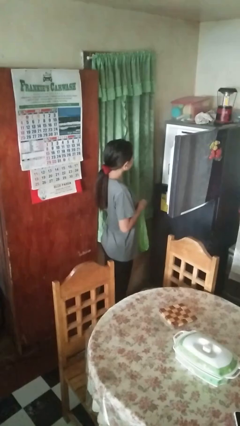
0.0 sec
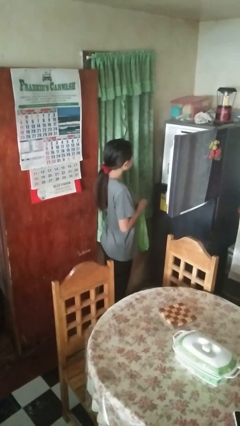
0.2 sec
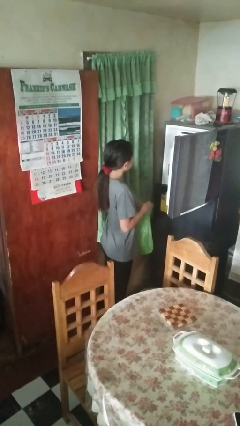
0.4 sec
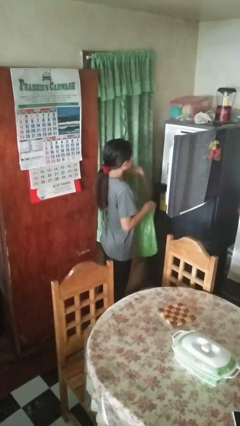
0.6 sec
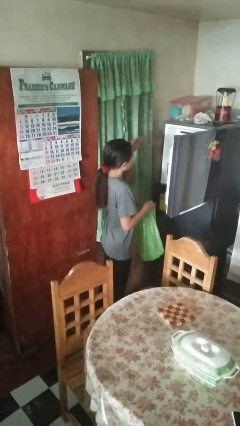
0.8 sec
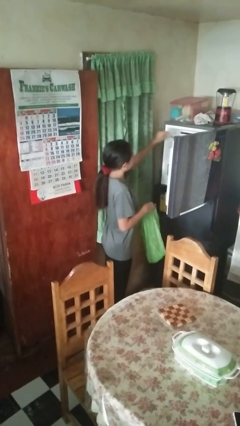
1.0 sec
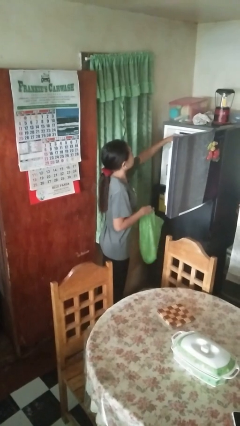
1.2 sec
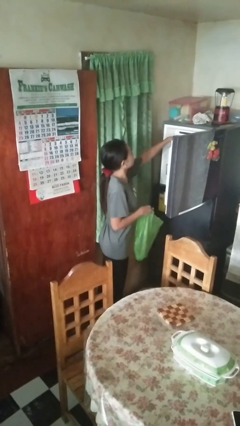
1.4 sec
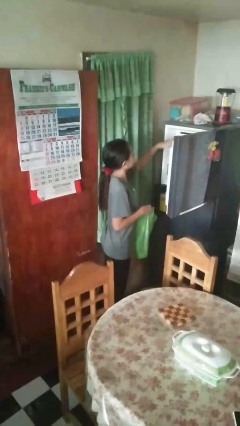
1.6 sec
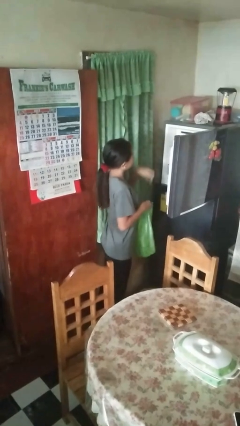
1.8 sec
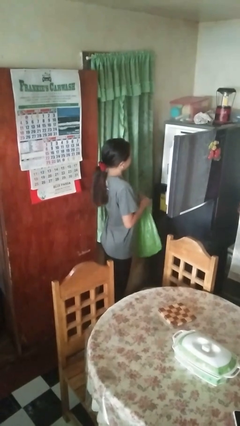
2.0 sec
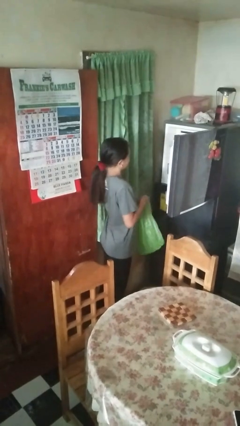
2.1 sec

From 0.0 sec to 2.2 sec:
person loads groceries into refrigerator

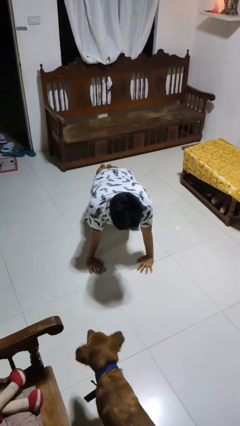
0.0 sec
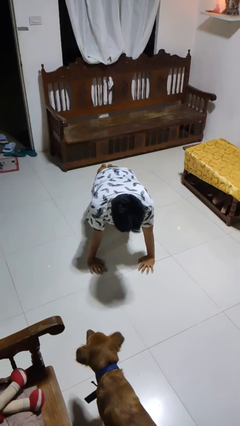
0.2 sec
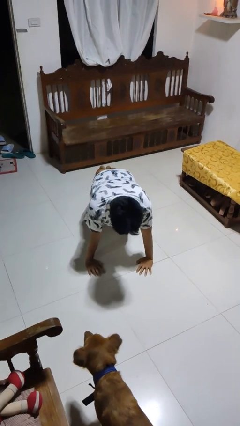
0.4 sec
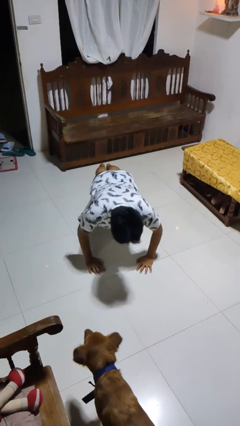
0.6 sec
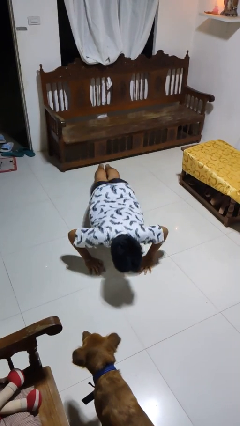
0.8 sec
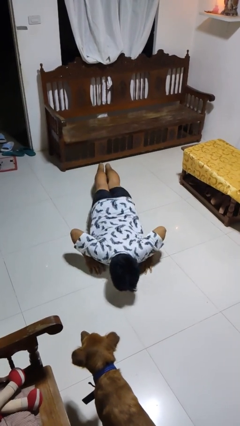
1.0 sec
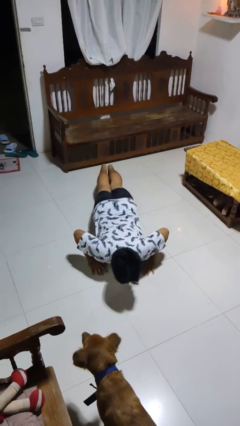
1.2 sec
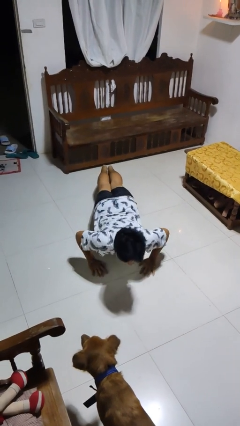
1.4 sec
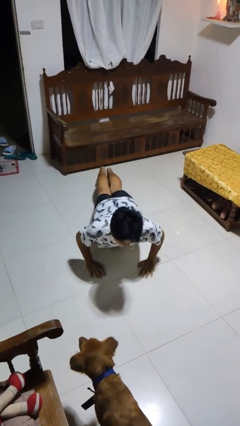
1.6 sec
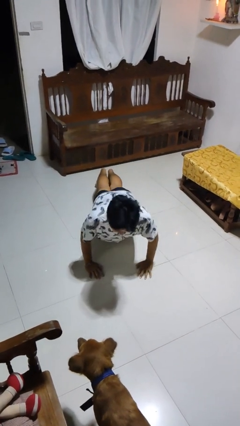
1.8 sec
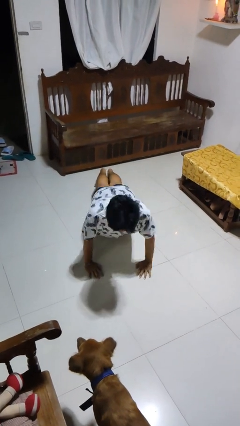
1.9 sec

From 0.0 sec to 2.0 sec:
person exercises with pushup

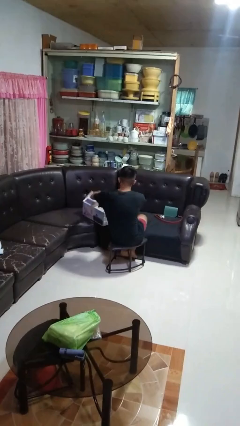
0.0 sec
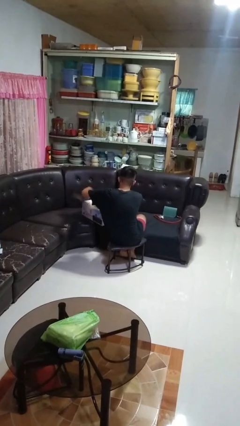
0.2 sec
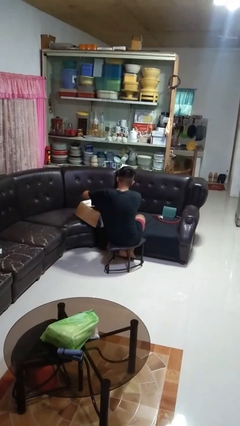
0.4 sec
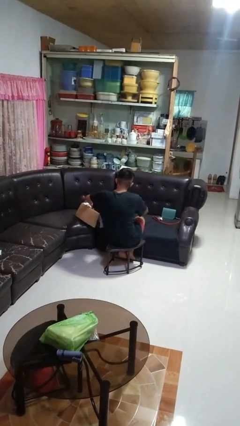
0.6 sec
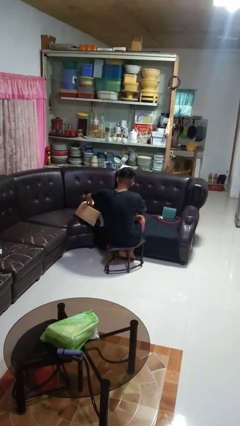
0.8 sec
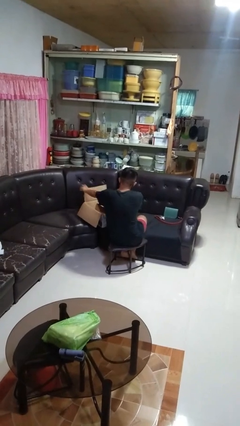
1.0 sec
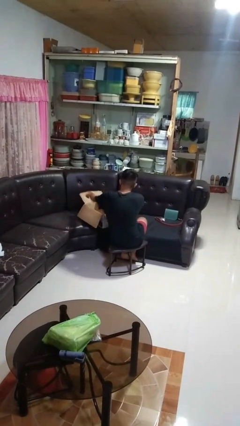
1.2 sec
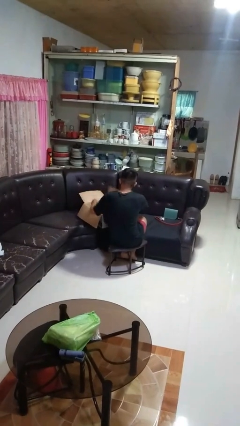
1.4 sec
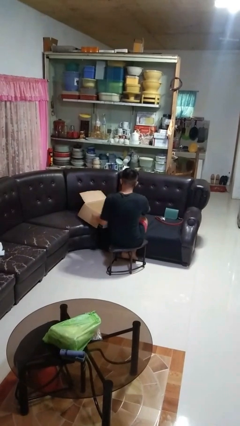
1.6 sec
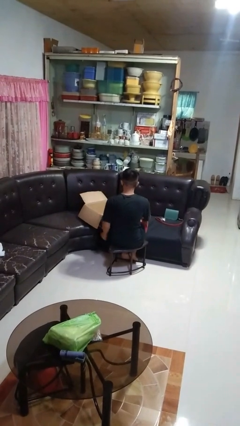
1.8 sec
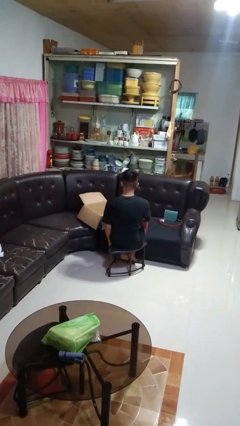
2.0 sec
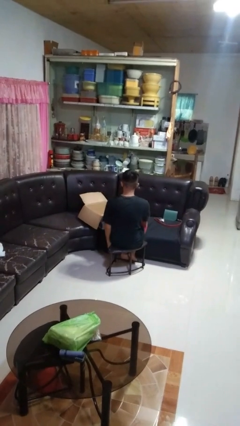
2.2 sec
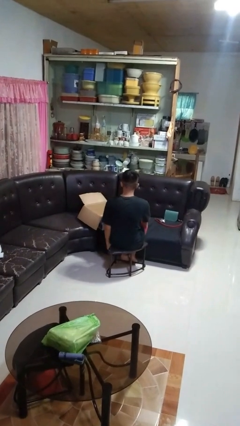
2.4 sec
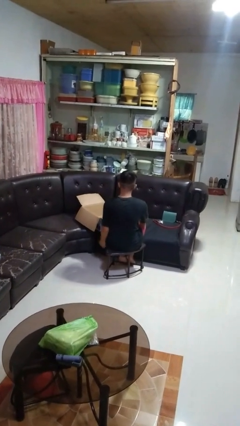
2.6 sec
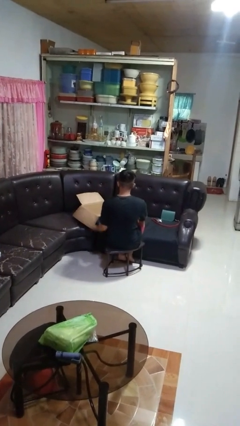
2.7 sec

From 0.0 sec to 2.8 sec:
person opens box

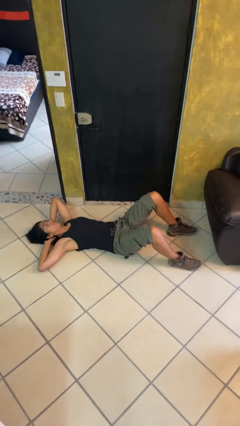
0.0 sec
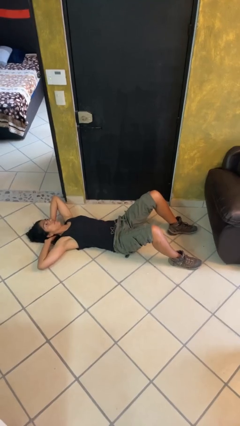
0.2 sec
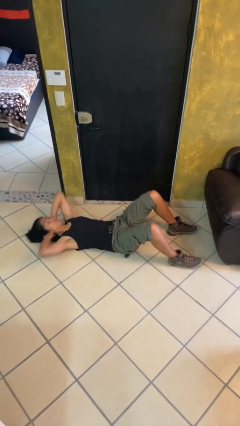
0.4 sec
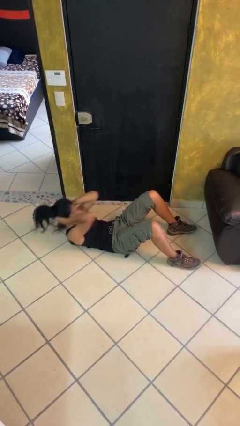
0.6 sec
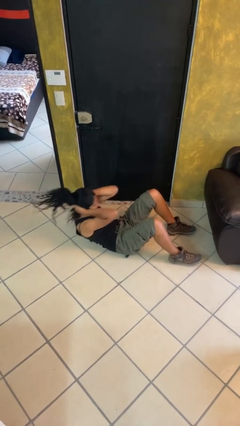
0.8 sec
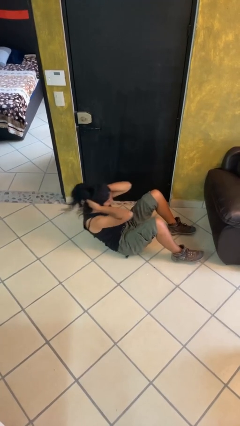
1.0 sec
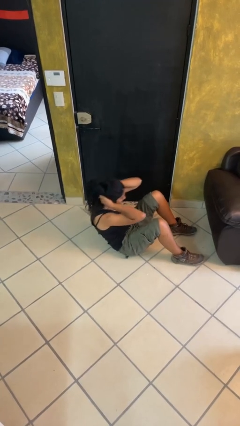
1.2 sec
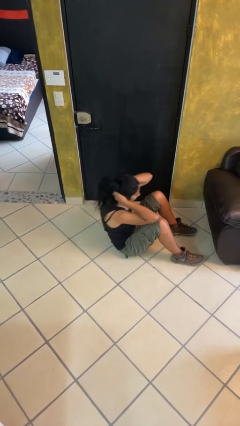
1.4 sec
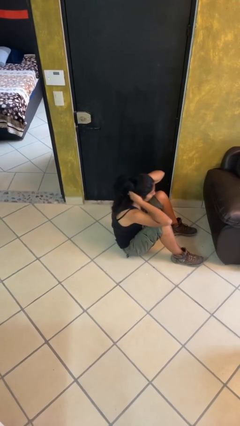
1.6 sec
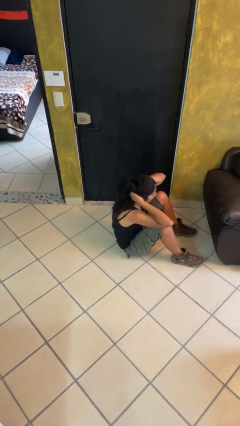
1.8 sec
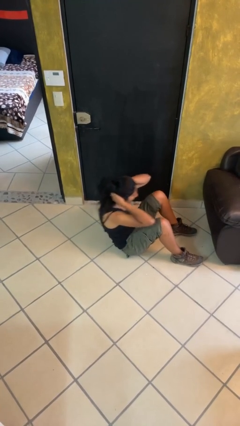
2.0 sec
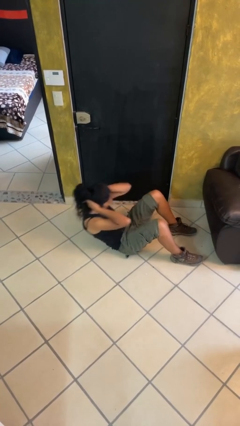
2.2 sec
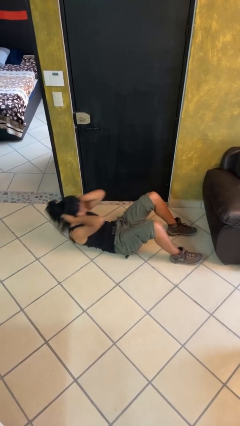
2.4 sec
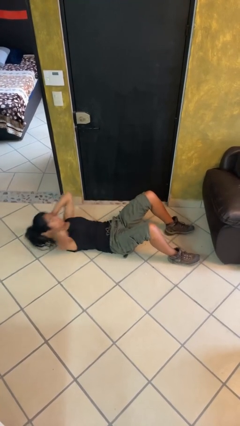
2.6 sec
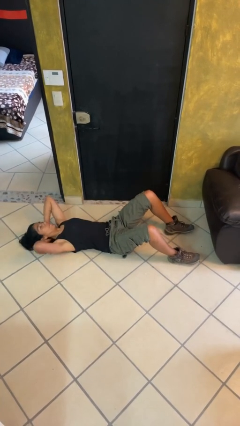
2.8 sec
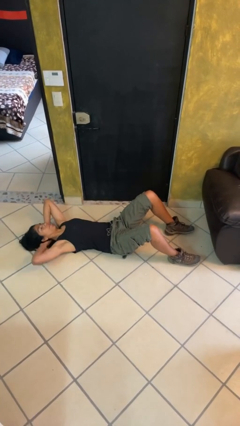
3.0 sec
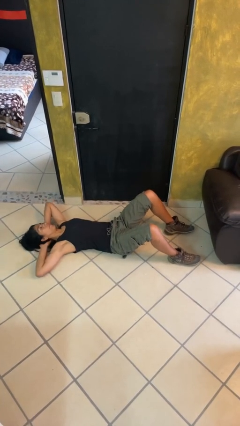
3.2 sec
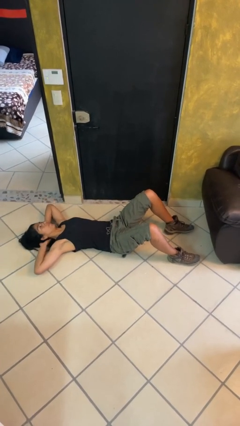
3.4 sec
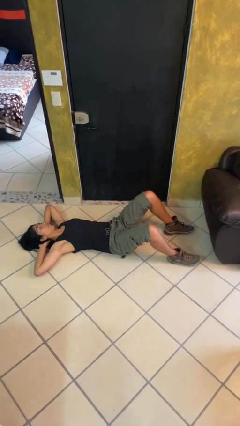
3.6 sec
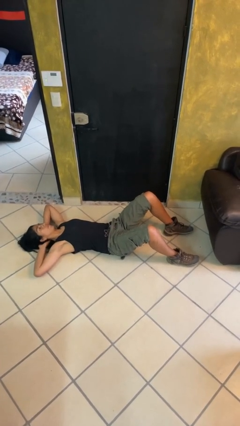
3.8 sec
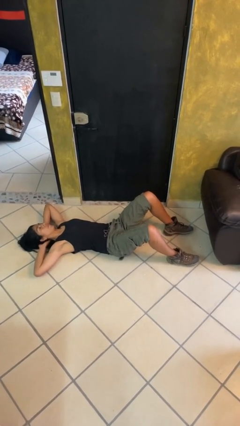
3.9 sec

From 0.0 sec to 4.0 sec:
person exercises with situp

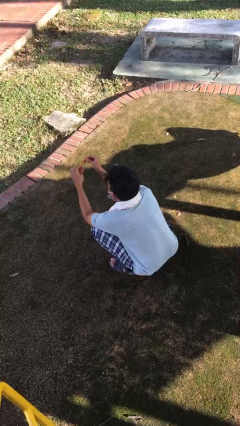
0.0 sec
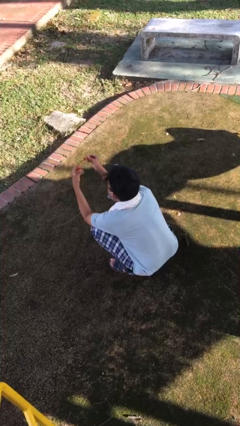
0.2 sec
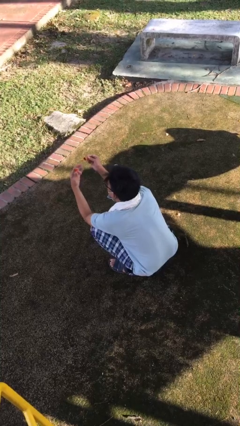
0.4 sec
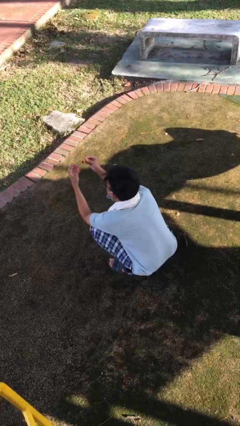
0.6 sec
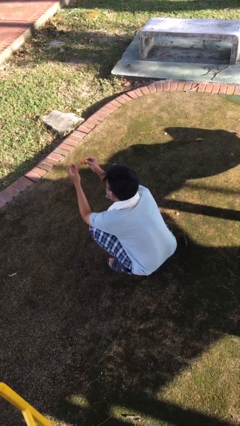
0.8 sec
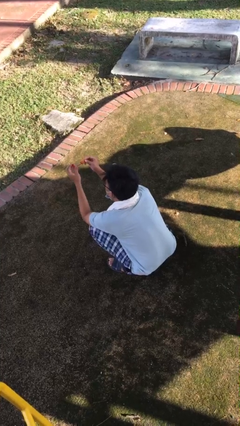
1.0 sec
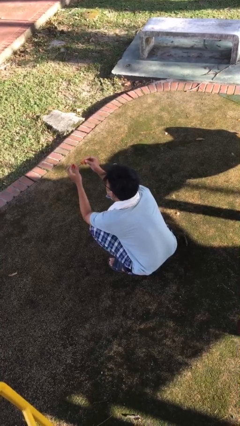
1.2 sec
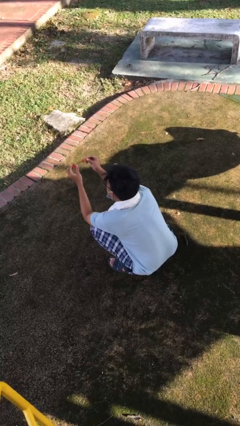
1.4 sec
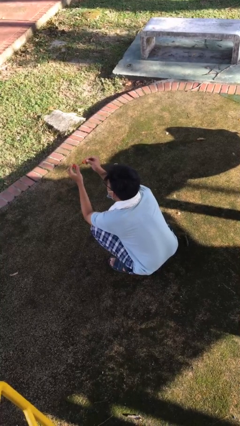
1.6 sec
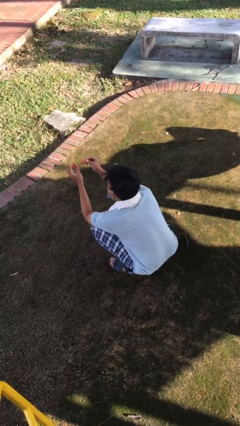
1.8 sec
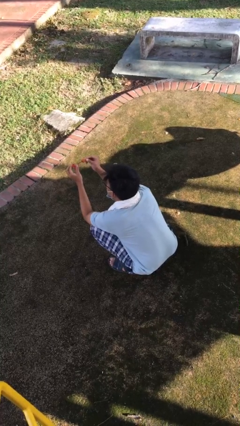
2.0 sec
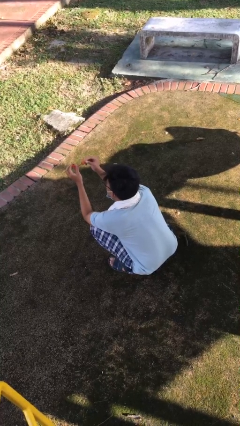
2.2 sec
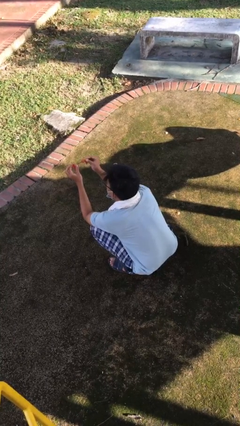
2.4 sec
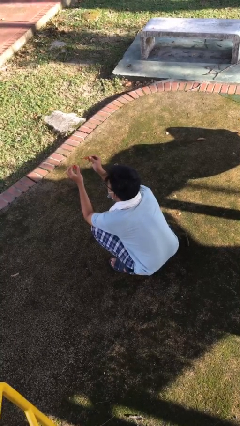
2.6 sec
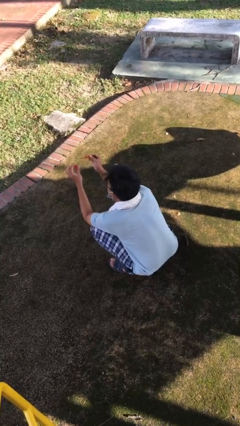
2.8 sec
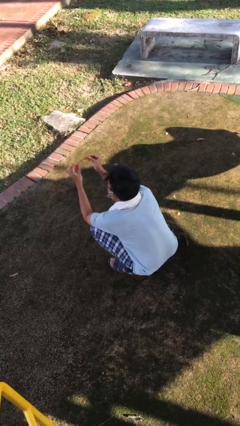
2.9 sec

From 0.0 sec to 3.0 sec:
person paints fingernails

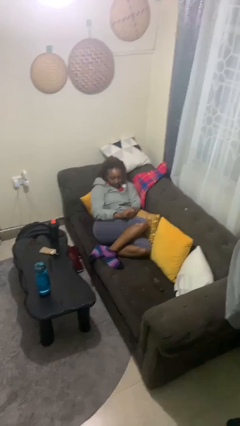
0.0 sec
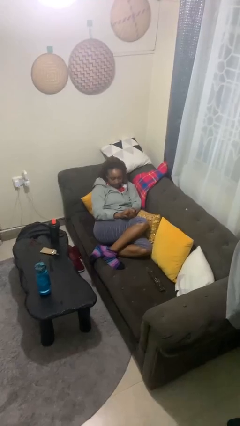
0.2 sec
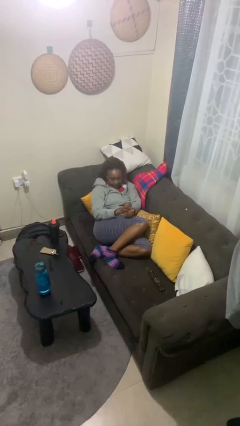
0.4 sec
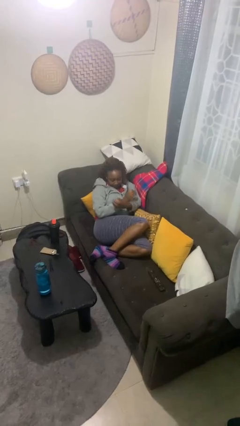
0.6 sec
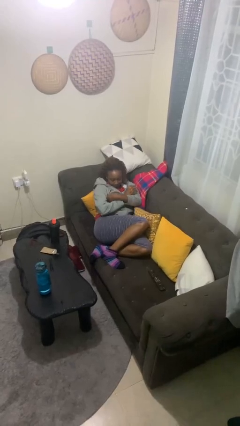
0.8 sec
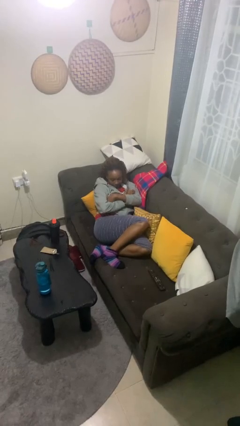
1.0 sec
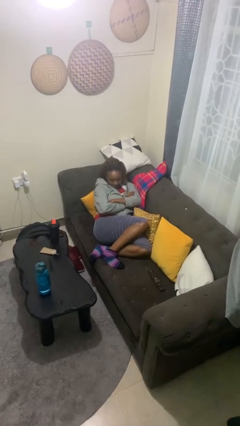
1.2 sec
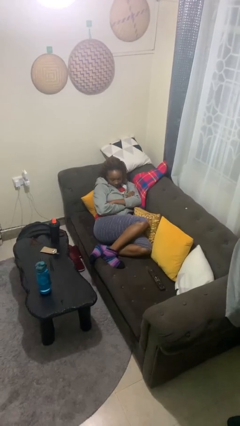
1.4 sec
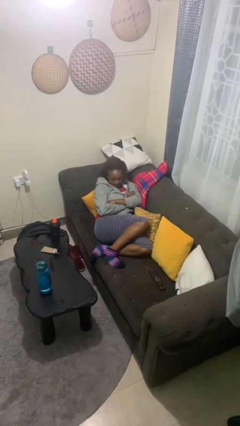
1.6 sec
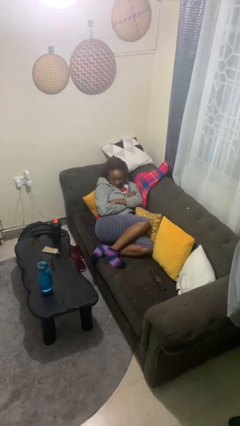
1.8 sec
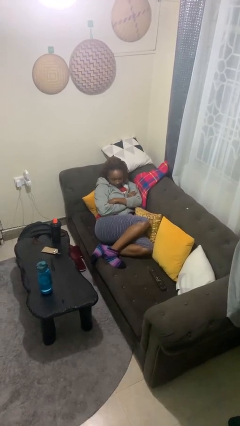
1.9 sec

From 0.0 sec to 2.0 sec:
person crosses arms

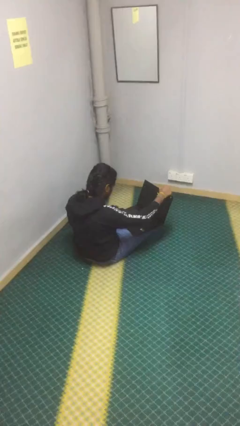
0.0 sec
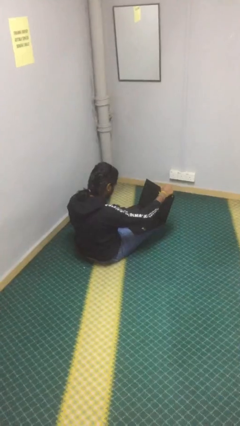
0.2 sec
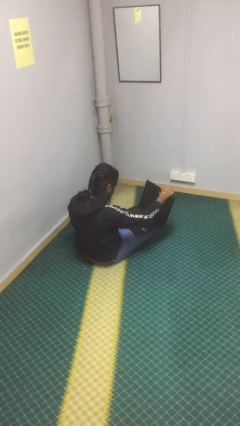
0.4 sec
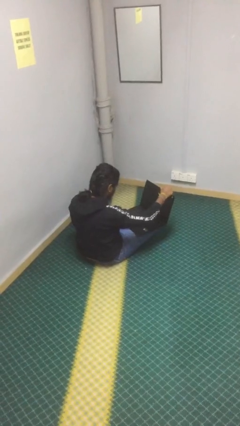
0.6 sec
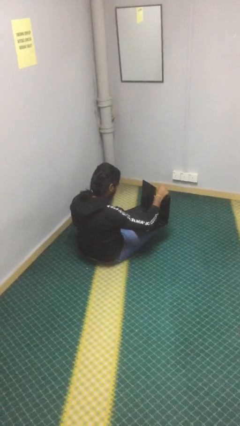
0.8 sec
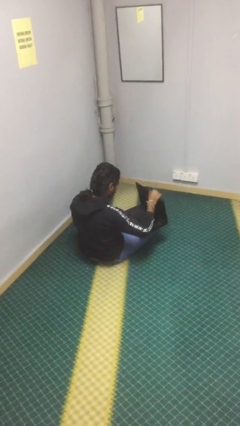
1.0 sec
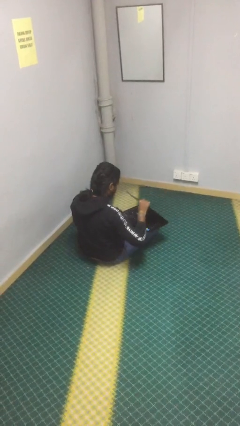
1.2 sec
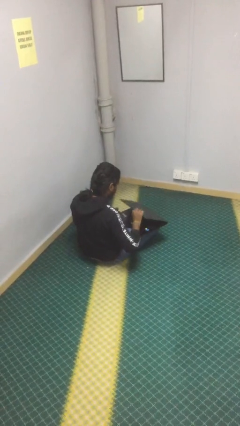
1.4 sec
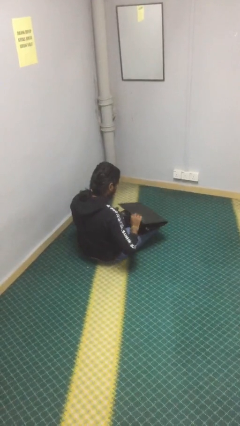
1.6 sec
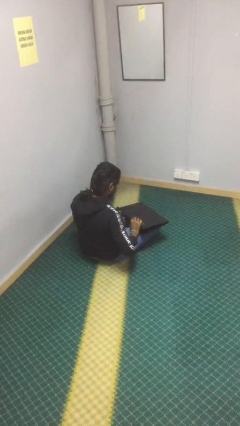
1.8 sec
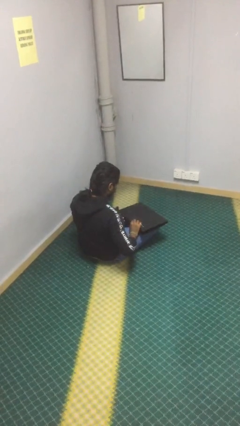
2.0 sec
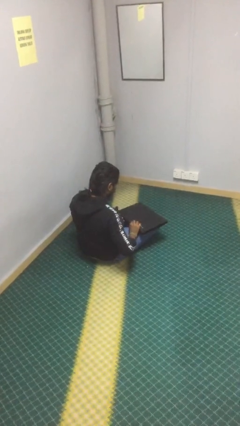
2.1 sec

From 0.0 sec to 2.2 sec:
person closes laptop
